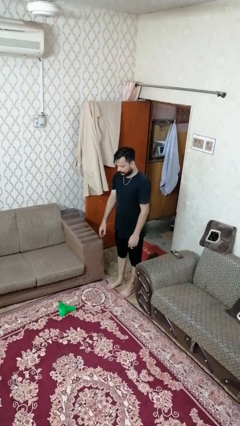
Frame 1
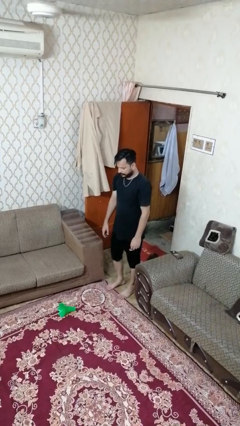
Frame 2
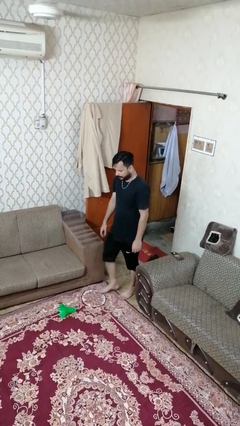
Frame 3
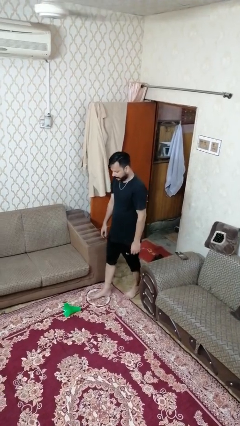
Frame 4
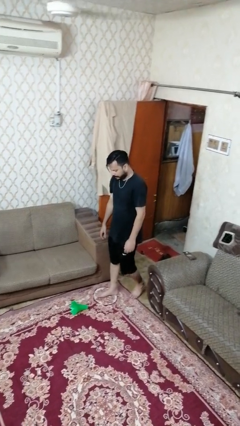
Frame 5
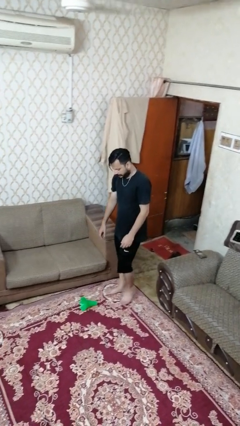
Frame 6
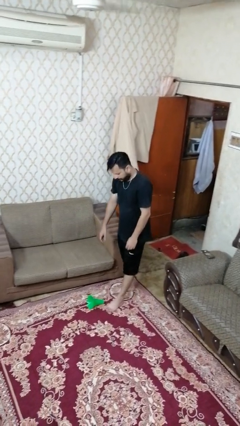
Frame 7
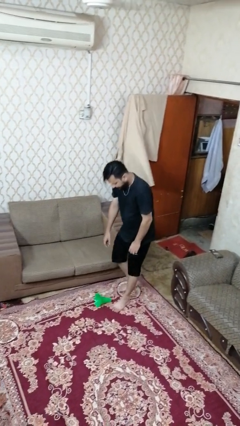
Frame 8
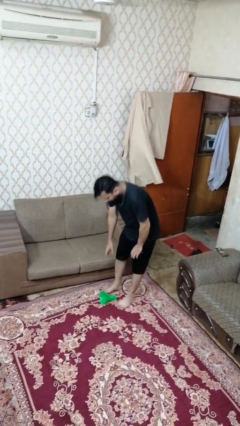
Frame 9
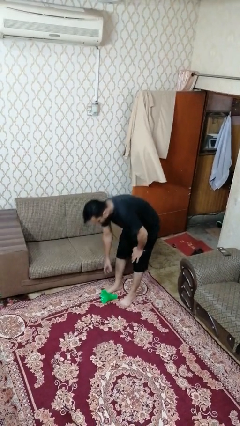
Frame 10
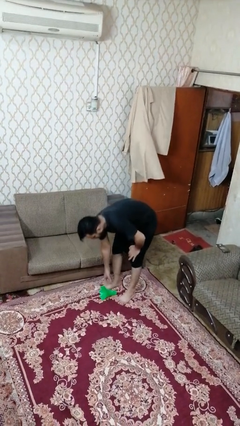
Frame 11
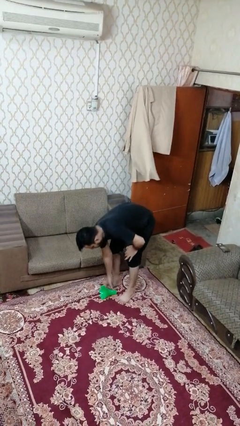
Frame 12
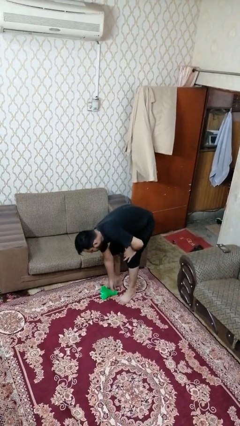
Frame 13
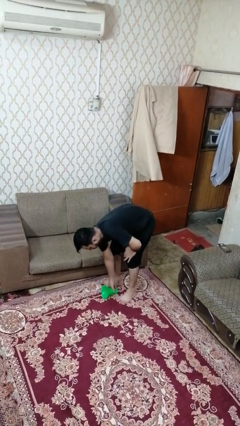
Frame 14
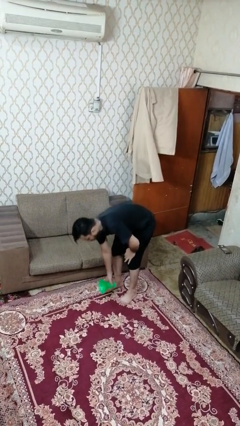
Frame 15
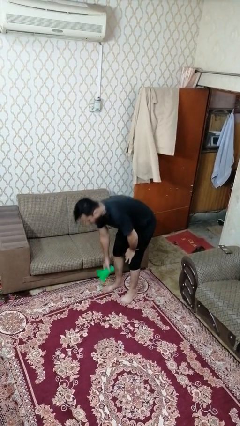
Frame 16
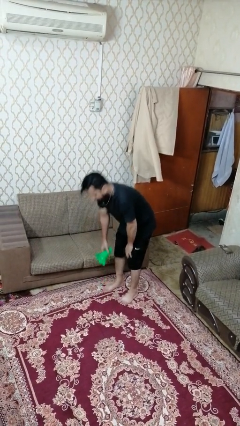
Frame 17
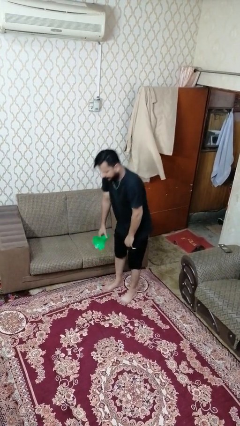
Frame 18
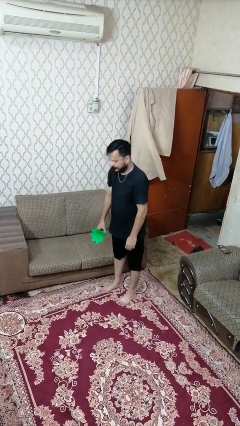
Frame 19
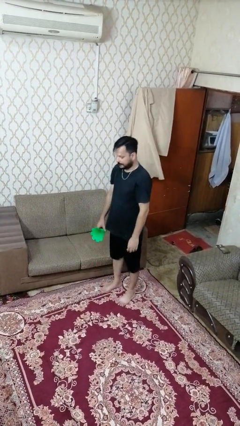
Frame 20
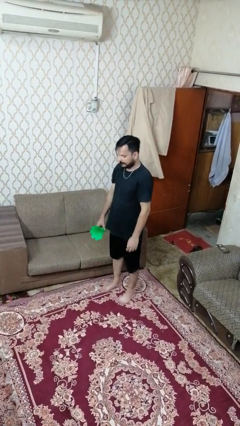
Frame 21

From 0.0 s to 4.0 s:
person picks up object from floor

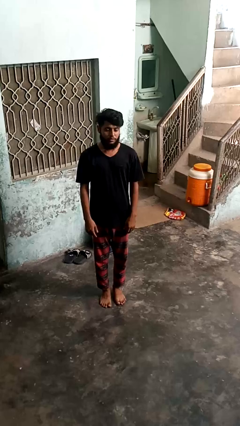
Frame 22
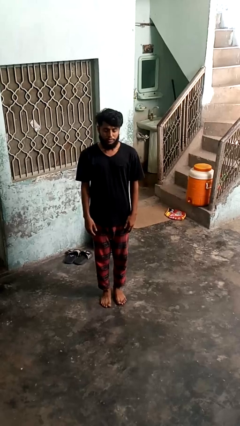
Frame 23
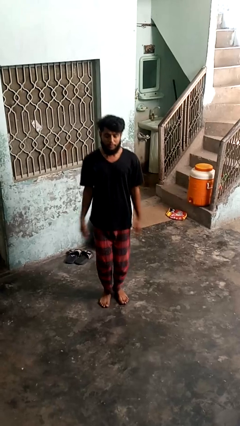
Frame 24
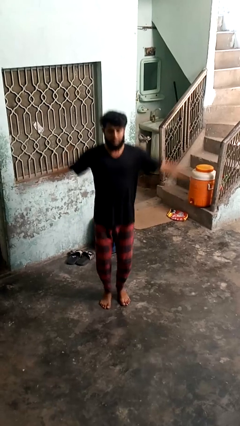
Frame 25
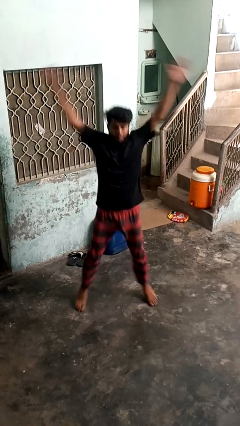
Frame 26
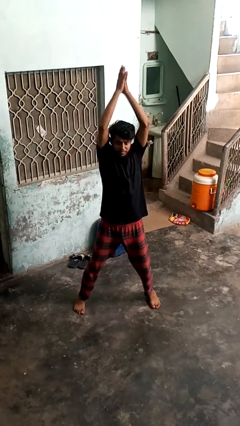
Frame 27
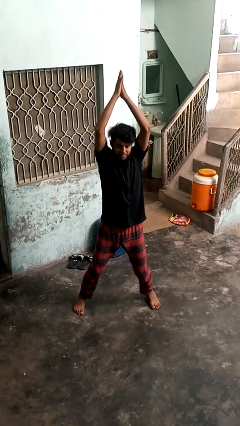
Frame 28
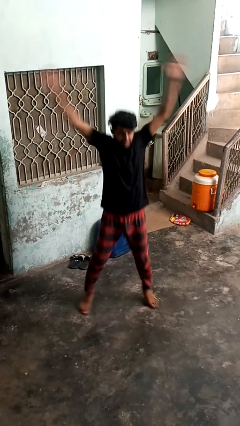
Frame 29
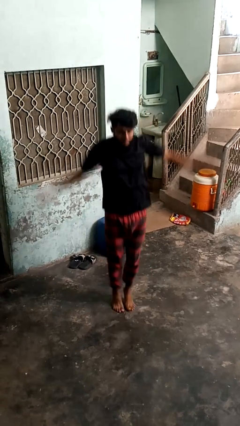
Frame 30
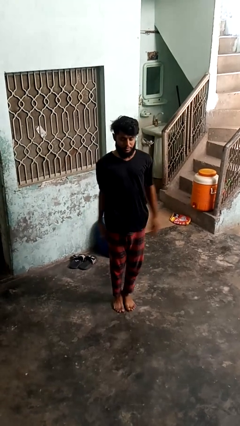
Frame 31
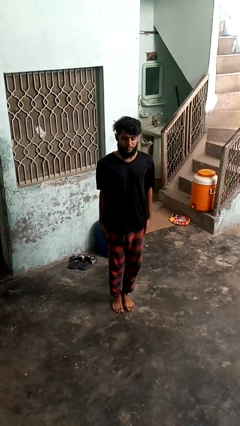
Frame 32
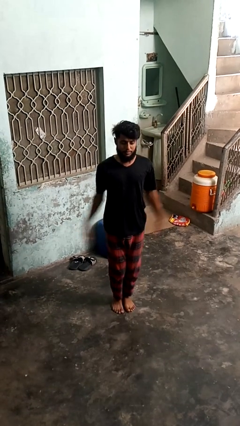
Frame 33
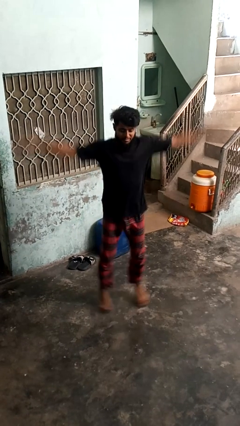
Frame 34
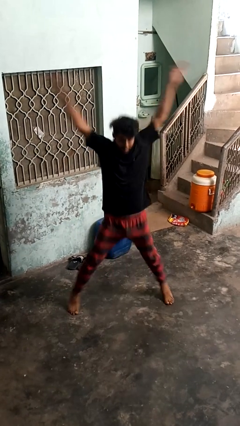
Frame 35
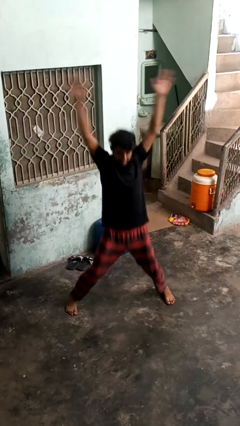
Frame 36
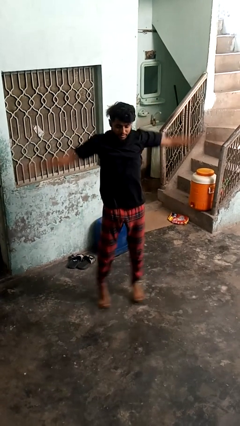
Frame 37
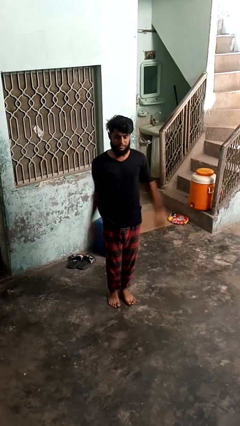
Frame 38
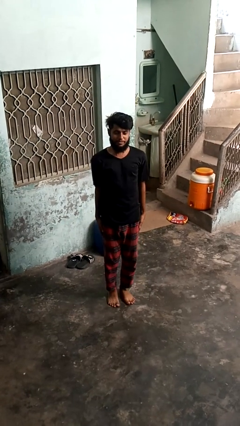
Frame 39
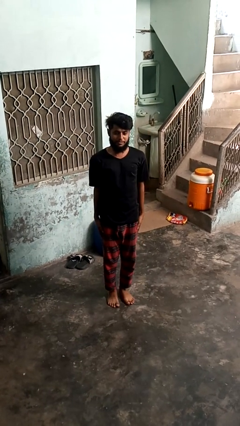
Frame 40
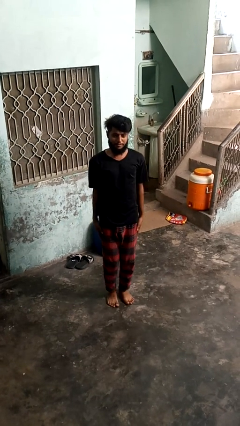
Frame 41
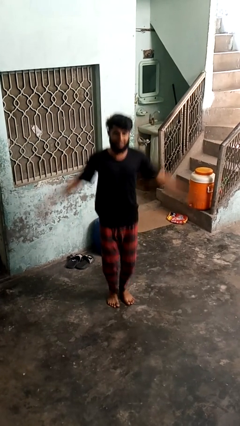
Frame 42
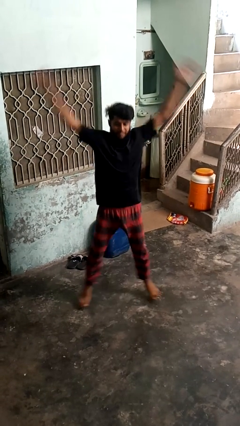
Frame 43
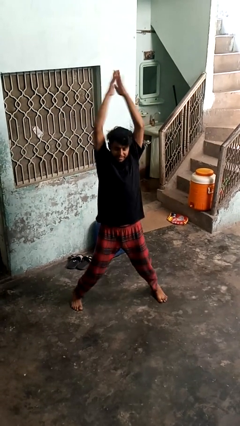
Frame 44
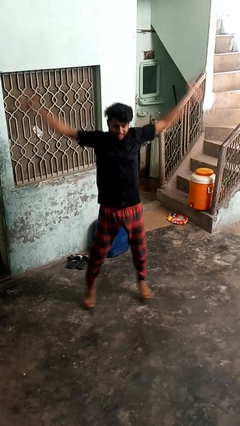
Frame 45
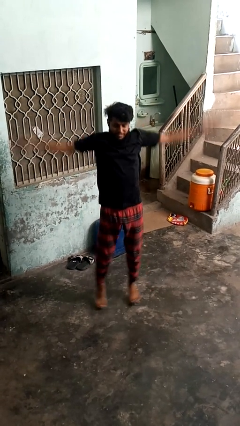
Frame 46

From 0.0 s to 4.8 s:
person exercises with situp

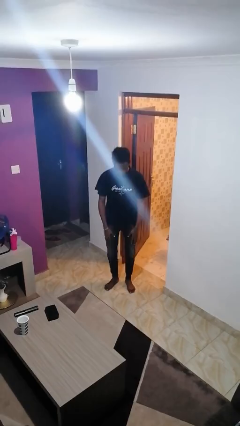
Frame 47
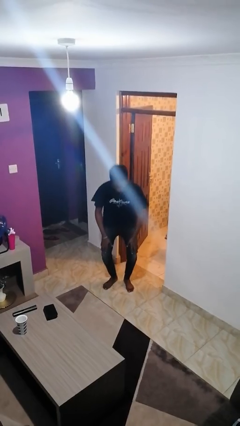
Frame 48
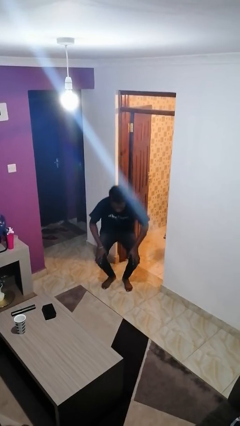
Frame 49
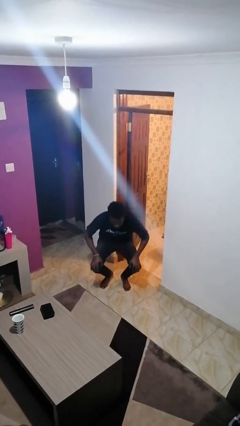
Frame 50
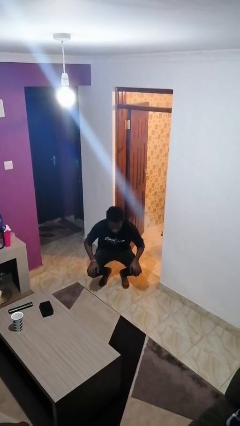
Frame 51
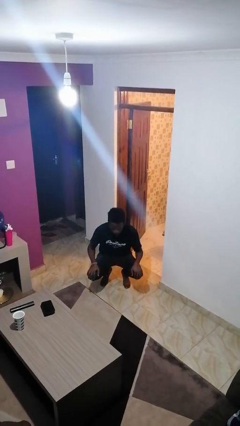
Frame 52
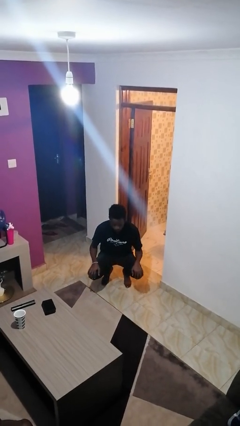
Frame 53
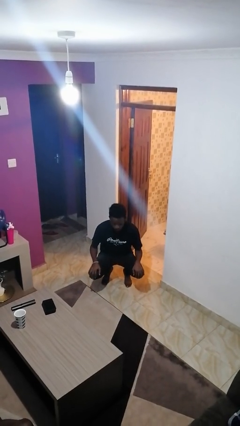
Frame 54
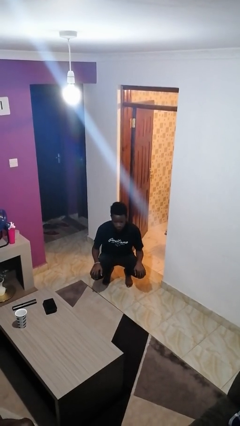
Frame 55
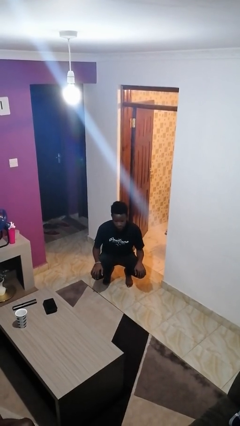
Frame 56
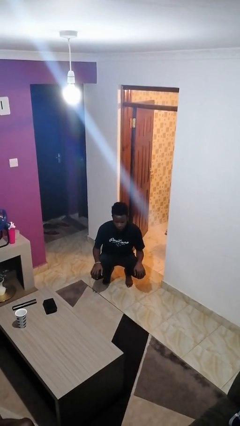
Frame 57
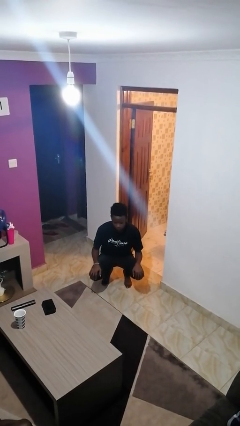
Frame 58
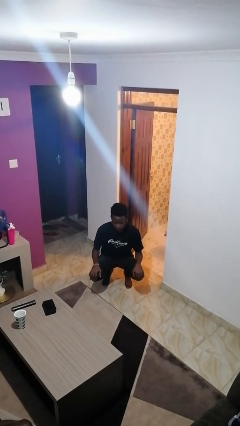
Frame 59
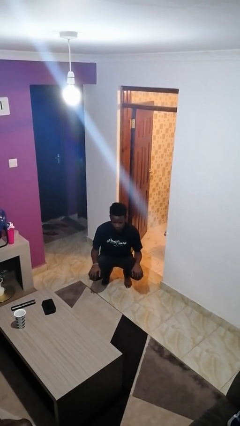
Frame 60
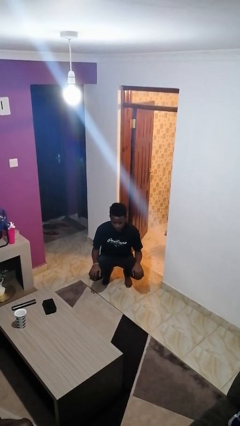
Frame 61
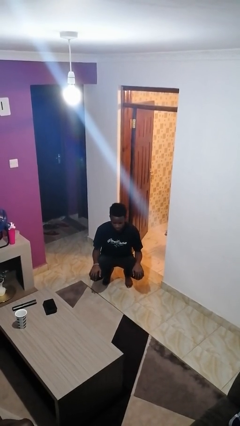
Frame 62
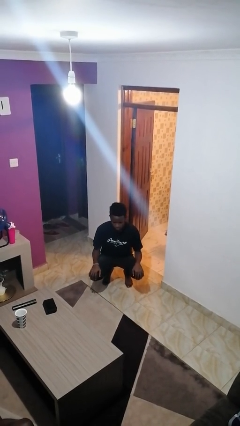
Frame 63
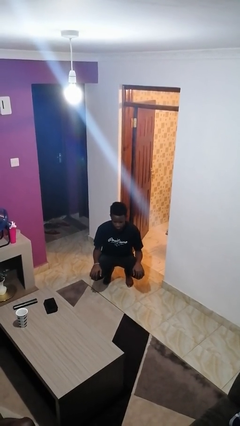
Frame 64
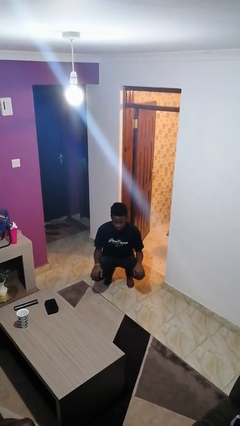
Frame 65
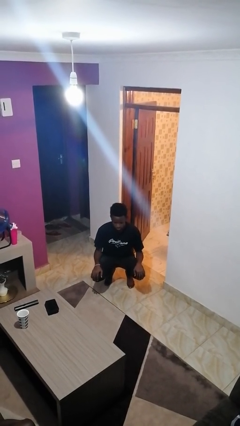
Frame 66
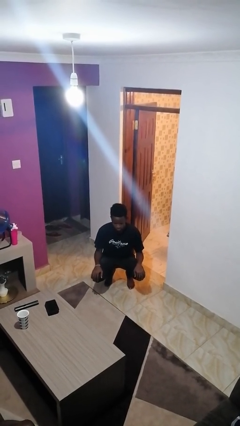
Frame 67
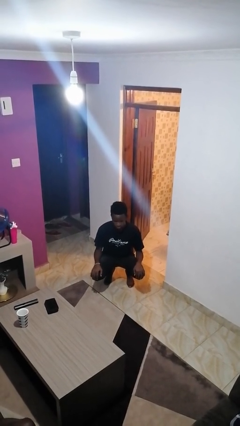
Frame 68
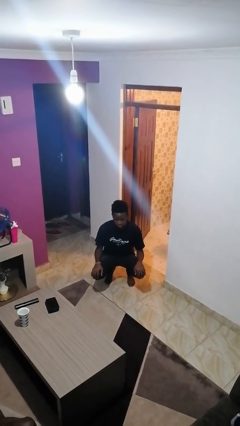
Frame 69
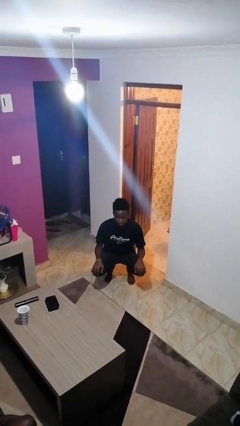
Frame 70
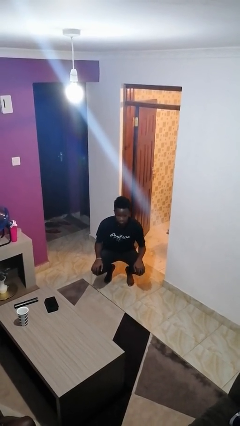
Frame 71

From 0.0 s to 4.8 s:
person squats

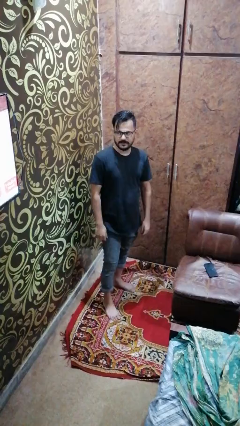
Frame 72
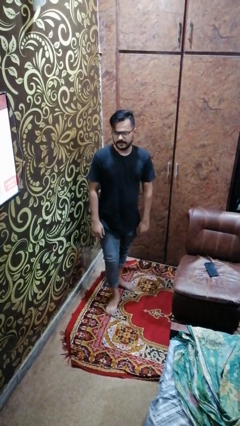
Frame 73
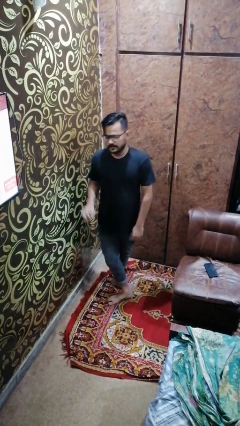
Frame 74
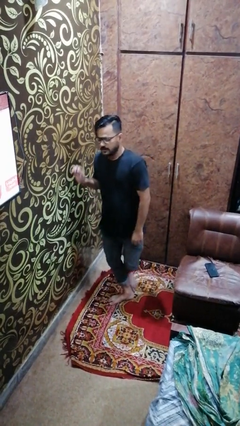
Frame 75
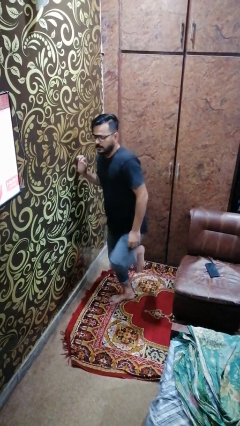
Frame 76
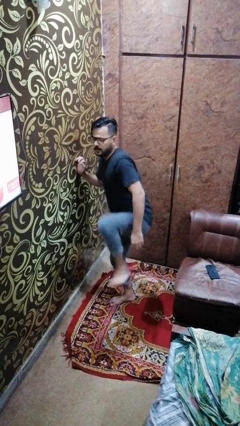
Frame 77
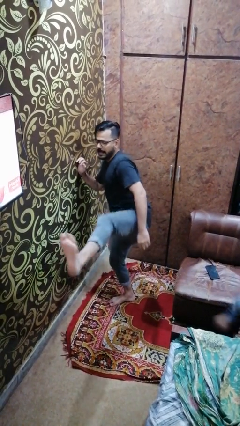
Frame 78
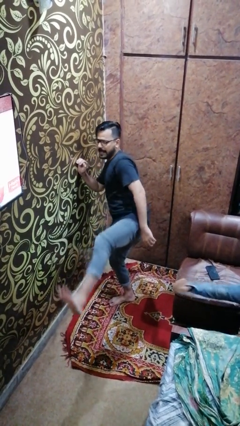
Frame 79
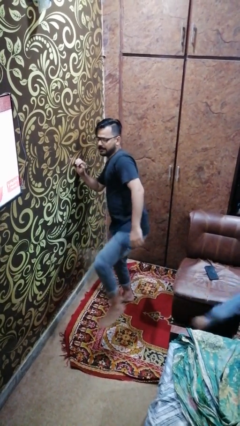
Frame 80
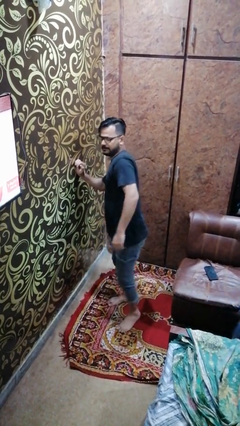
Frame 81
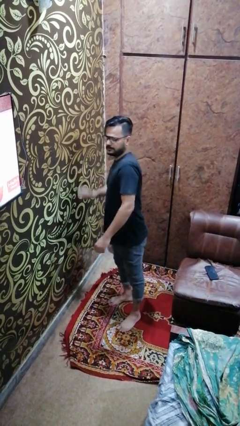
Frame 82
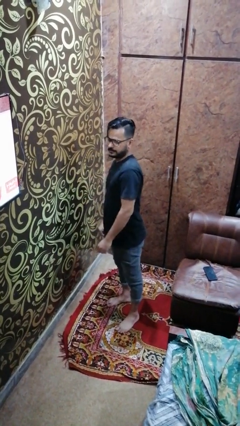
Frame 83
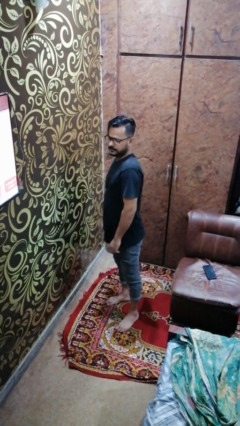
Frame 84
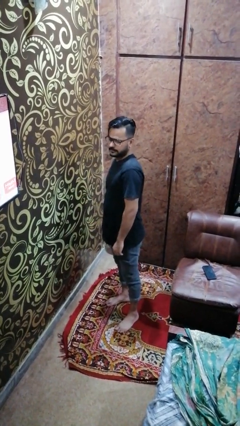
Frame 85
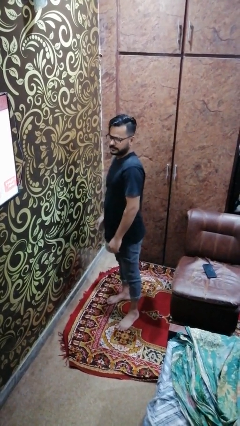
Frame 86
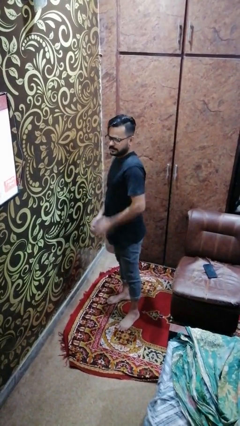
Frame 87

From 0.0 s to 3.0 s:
person karate kicks

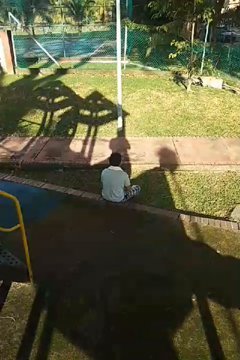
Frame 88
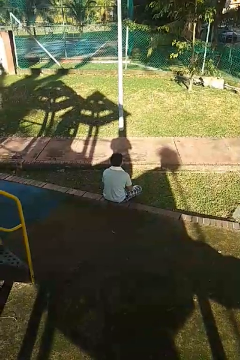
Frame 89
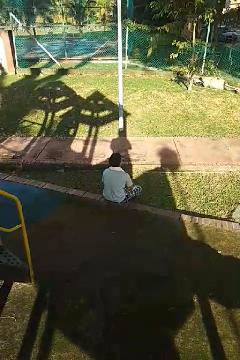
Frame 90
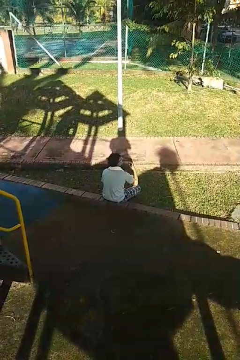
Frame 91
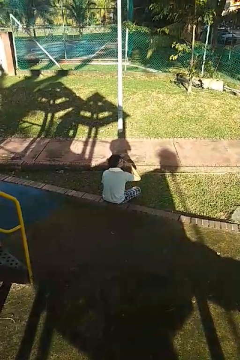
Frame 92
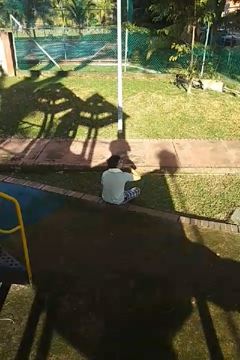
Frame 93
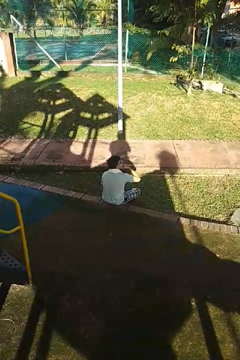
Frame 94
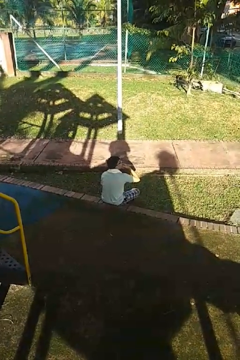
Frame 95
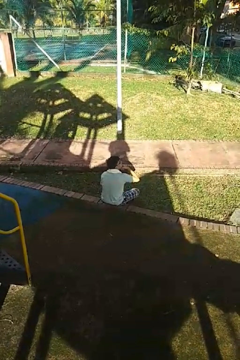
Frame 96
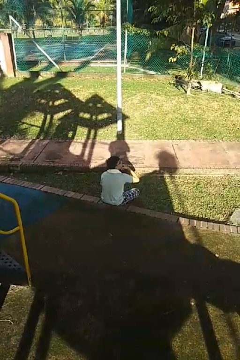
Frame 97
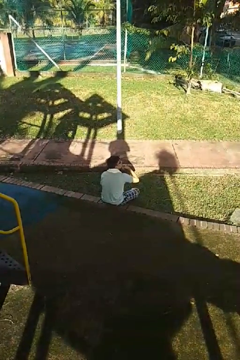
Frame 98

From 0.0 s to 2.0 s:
person strokes chin
